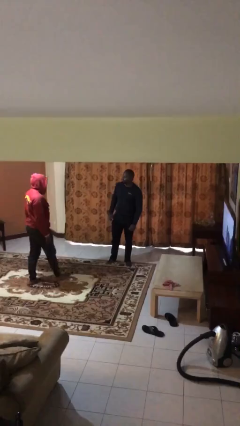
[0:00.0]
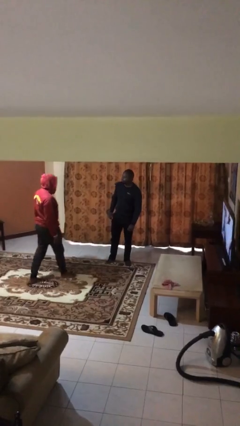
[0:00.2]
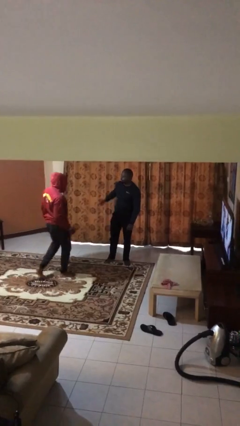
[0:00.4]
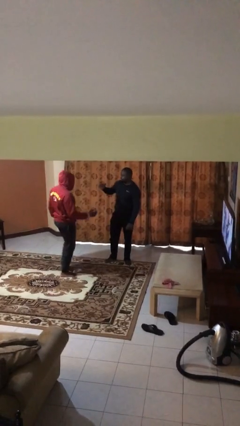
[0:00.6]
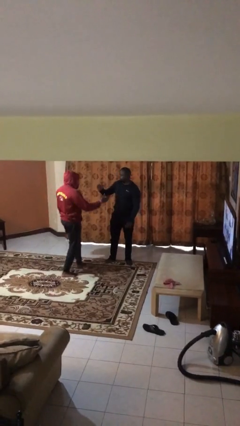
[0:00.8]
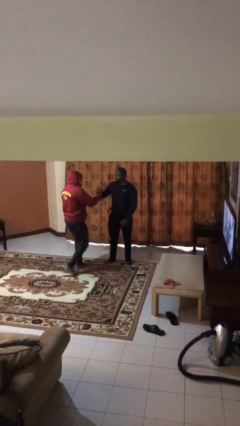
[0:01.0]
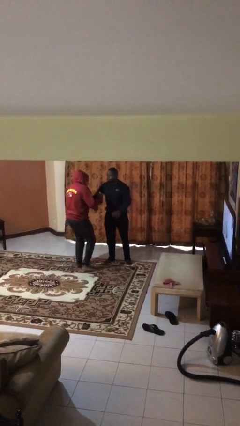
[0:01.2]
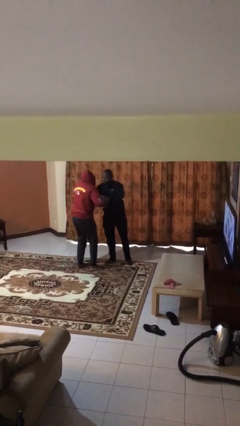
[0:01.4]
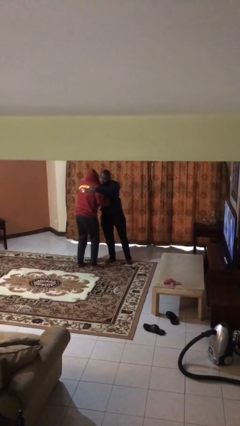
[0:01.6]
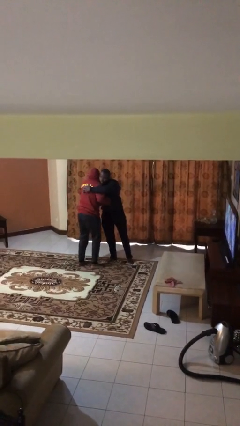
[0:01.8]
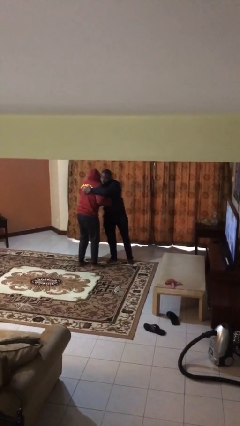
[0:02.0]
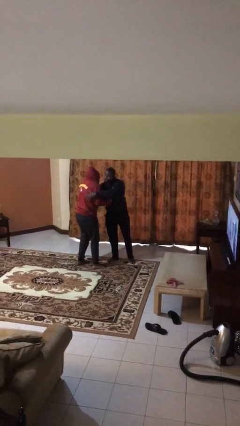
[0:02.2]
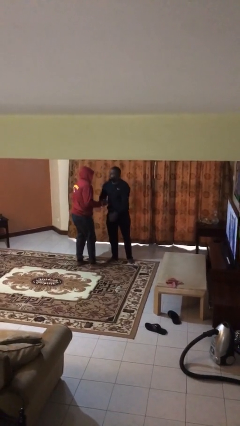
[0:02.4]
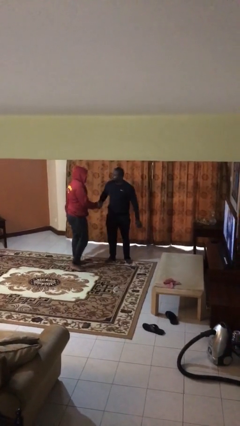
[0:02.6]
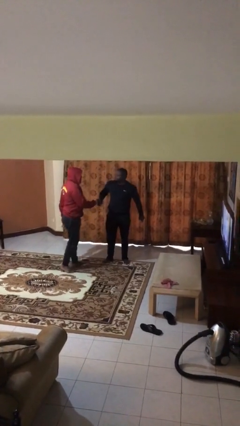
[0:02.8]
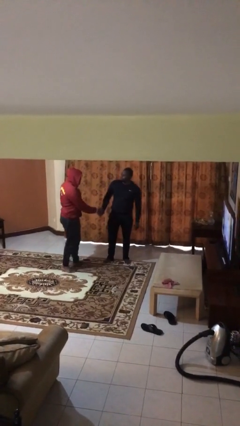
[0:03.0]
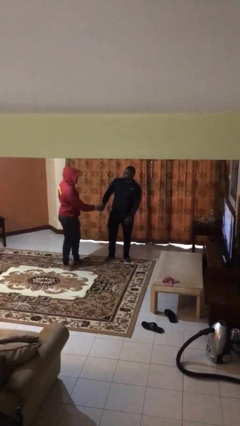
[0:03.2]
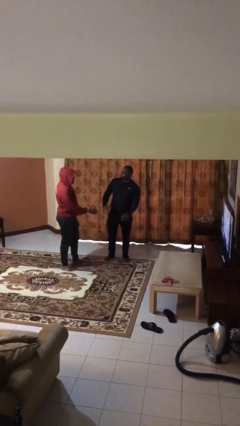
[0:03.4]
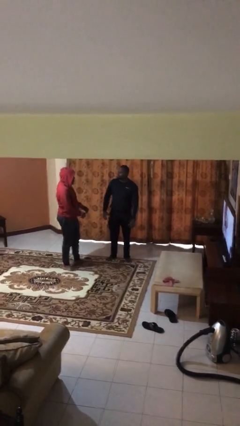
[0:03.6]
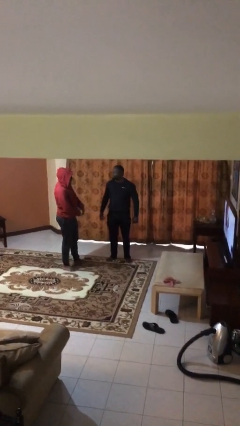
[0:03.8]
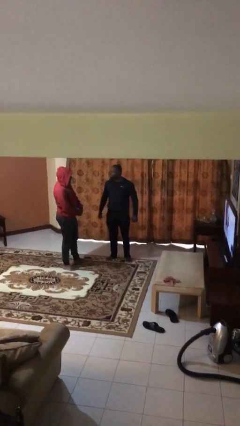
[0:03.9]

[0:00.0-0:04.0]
person embraces person

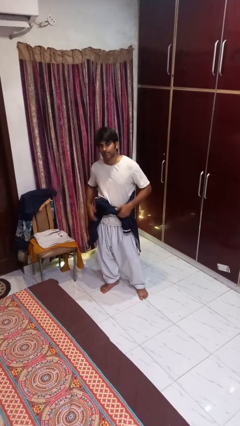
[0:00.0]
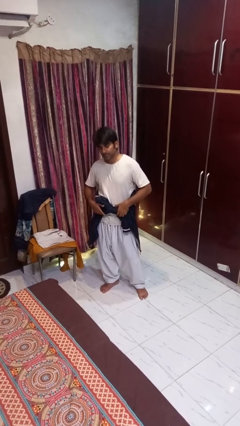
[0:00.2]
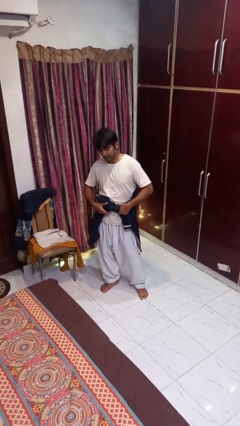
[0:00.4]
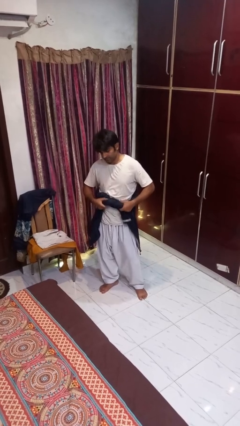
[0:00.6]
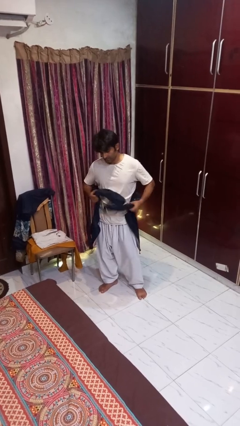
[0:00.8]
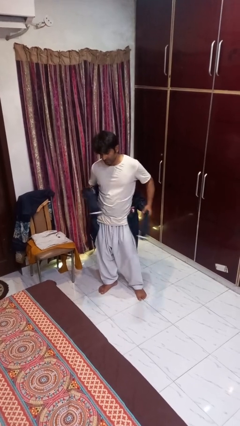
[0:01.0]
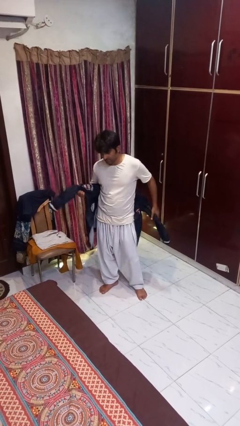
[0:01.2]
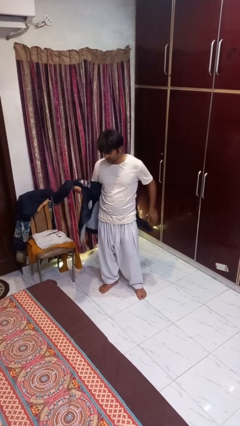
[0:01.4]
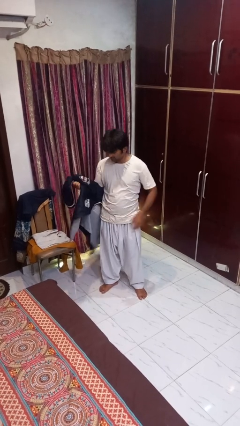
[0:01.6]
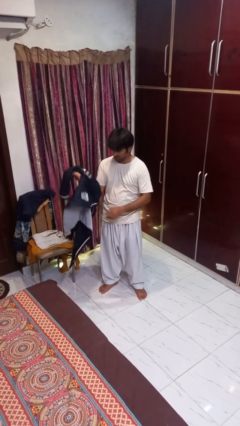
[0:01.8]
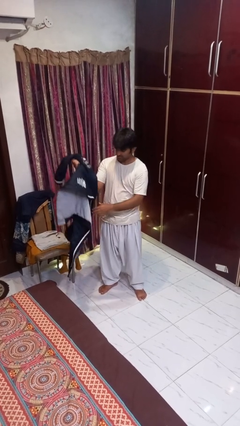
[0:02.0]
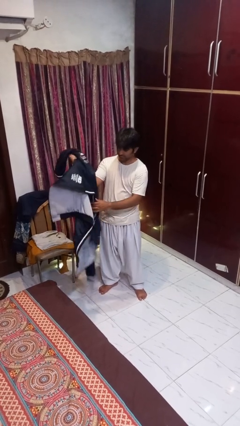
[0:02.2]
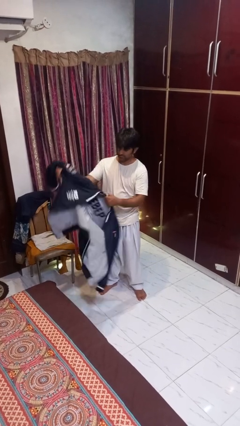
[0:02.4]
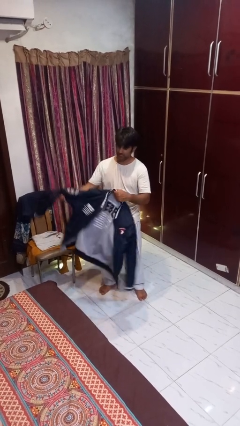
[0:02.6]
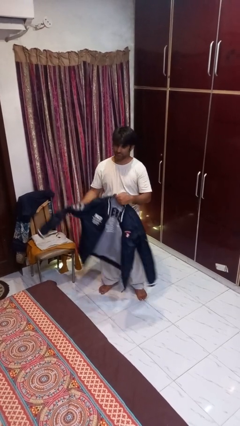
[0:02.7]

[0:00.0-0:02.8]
person unties jacket around waist

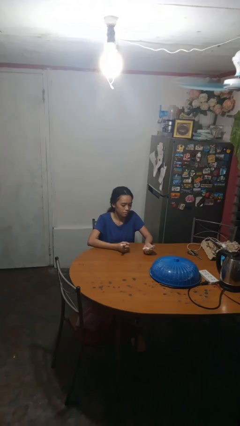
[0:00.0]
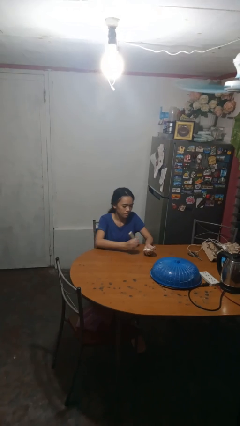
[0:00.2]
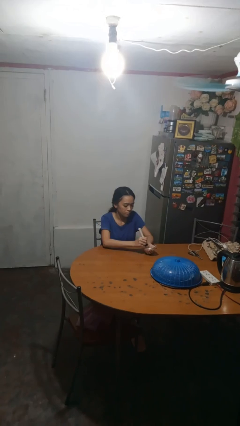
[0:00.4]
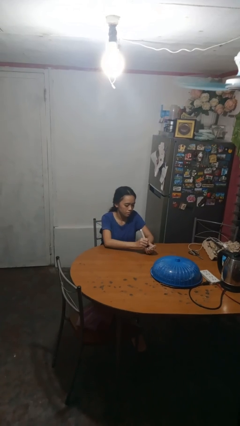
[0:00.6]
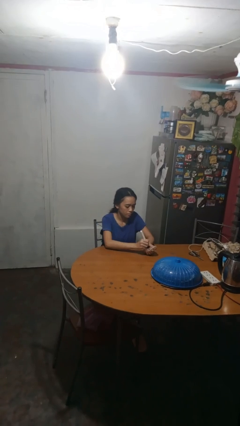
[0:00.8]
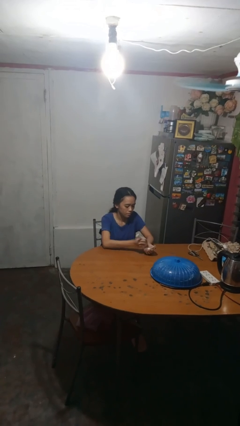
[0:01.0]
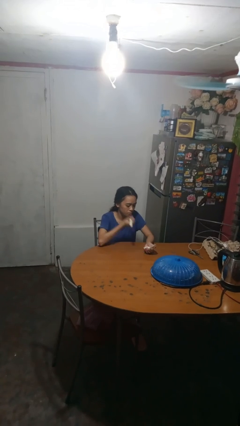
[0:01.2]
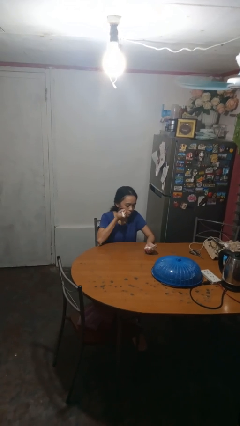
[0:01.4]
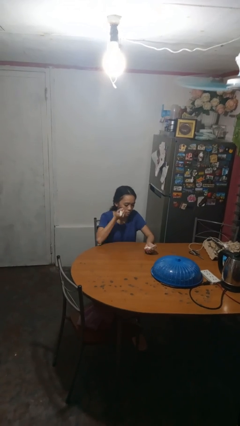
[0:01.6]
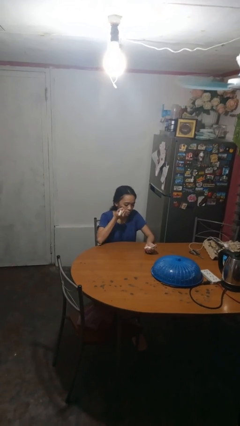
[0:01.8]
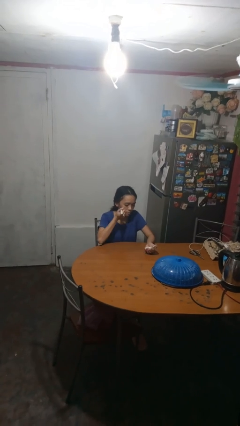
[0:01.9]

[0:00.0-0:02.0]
person applies foundation makeup

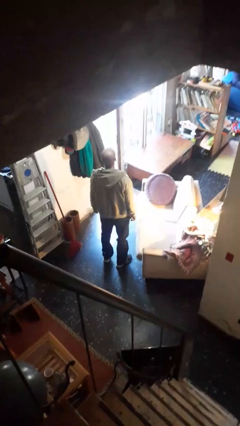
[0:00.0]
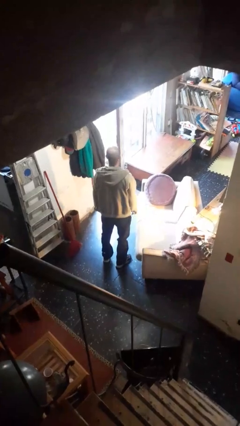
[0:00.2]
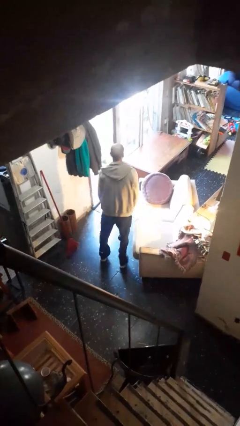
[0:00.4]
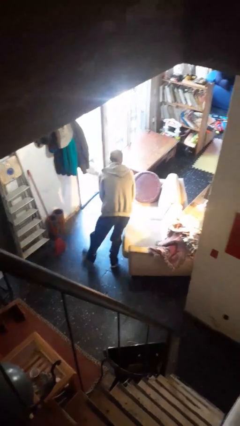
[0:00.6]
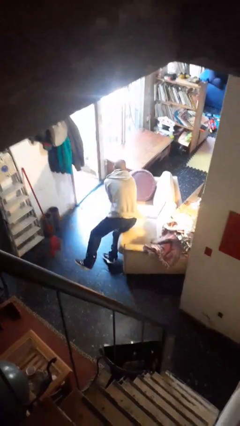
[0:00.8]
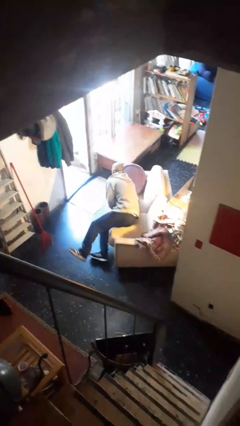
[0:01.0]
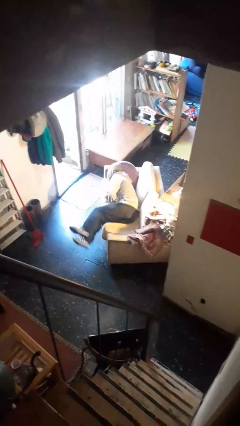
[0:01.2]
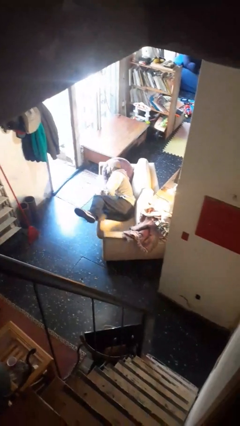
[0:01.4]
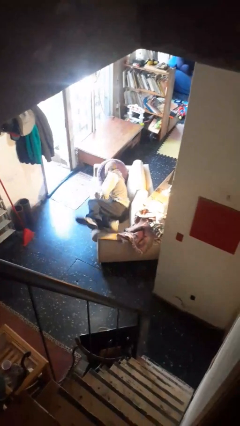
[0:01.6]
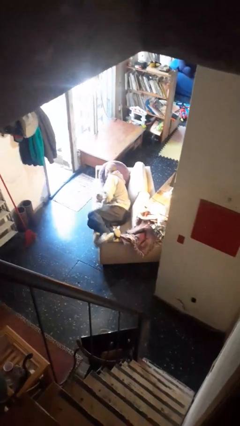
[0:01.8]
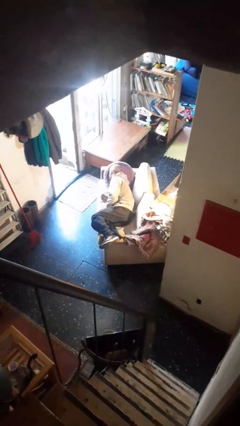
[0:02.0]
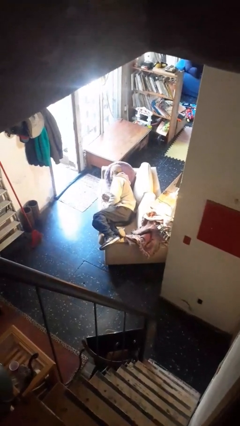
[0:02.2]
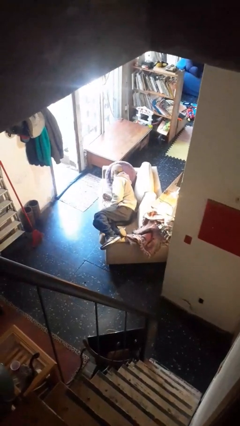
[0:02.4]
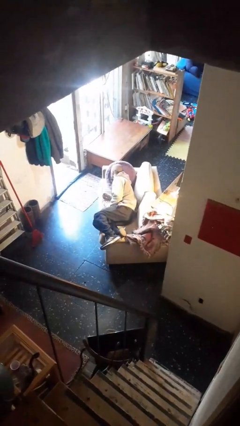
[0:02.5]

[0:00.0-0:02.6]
person lies down on couch

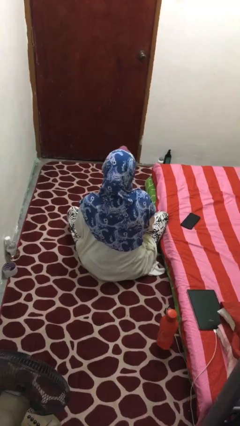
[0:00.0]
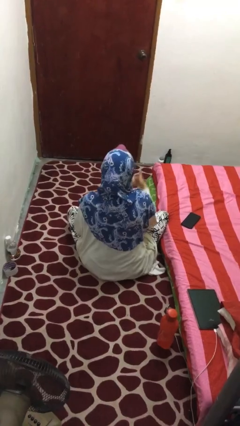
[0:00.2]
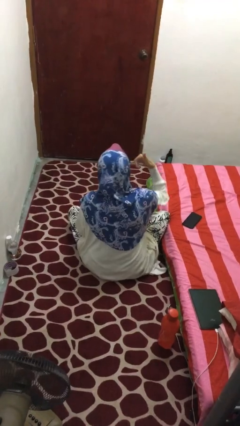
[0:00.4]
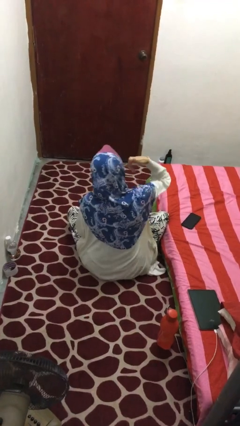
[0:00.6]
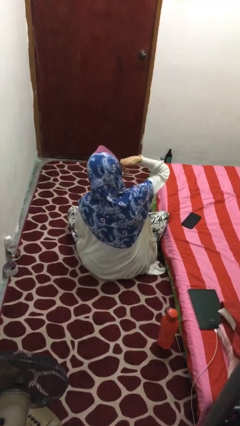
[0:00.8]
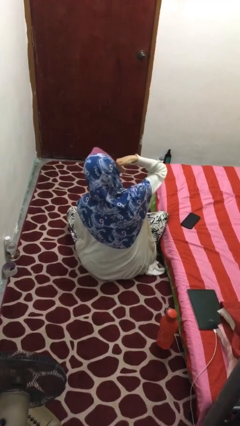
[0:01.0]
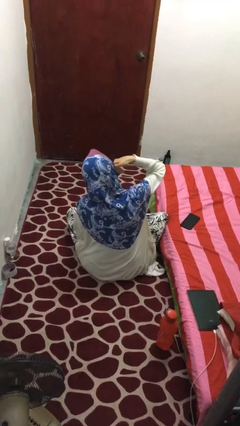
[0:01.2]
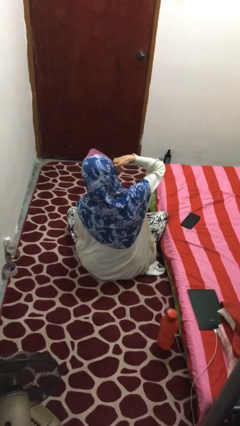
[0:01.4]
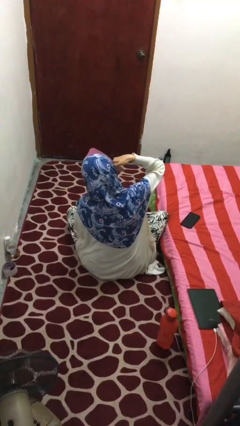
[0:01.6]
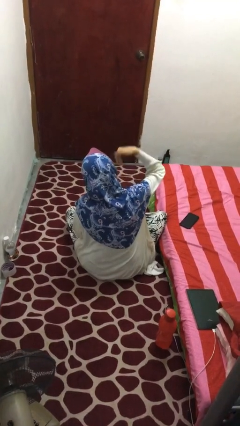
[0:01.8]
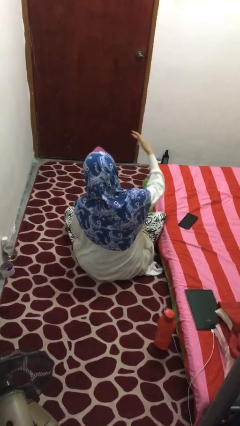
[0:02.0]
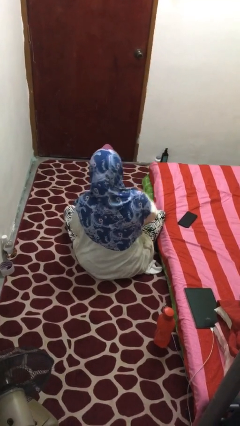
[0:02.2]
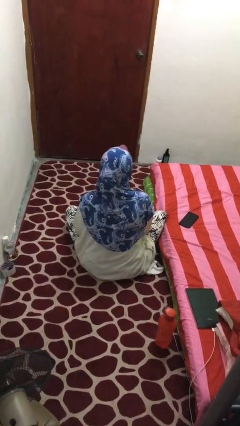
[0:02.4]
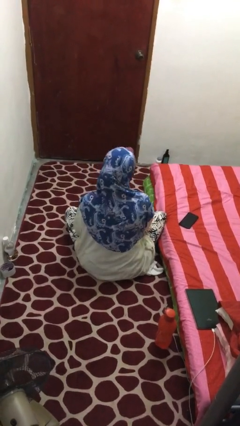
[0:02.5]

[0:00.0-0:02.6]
person gestures call me

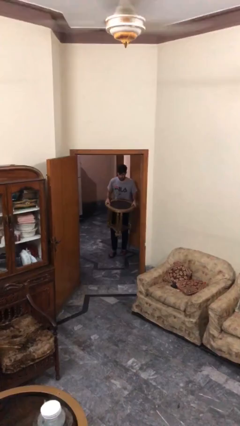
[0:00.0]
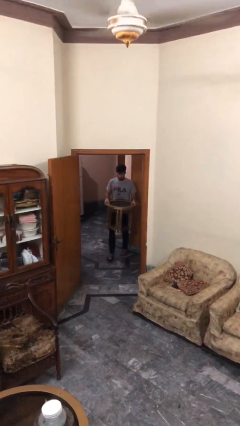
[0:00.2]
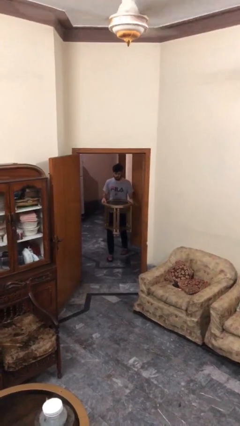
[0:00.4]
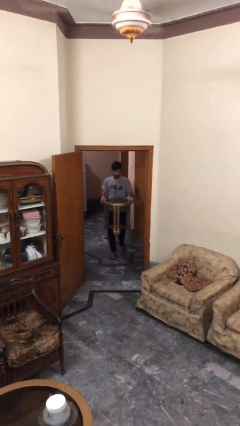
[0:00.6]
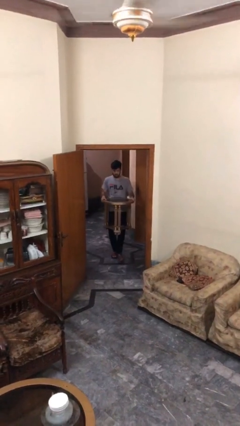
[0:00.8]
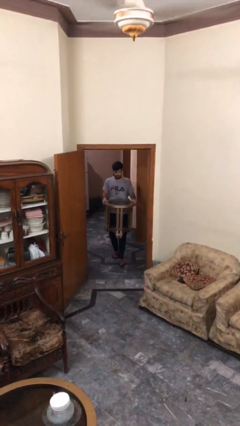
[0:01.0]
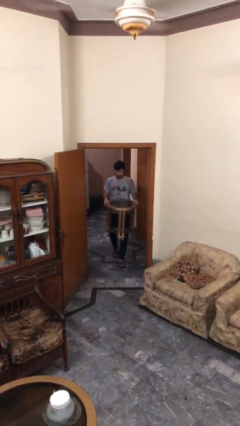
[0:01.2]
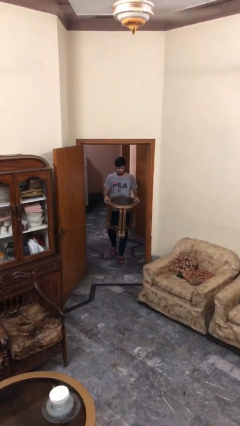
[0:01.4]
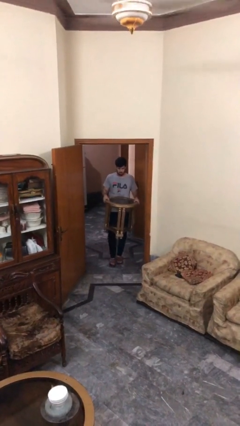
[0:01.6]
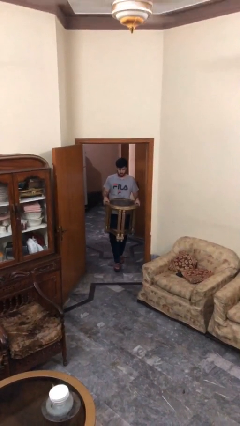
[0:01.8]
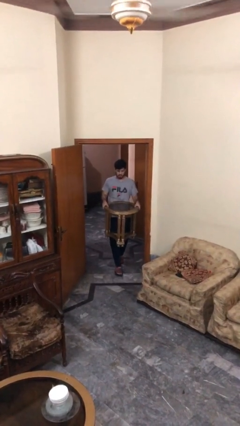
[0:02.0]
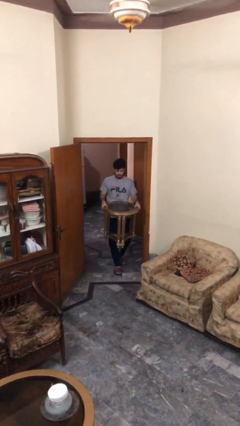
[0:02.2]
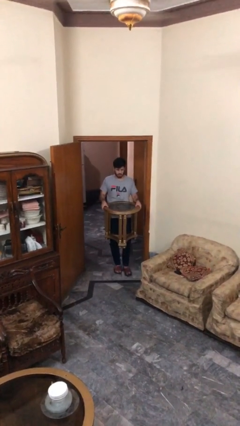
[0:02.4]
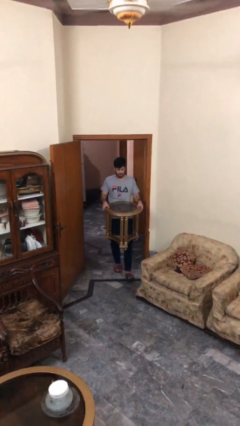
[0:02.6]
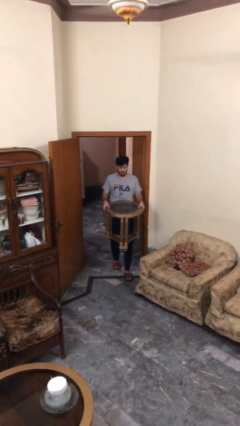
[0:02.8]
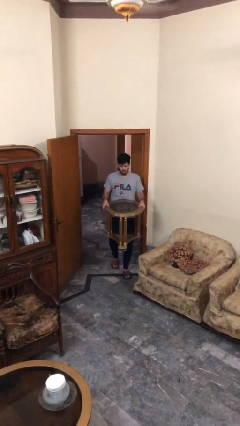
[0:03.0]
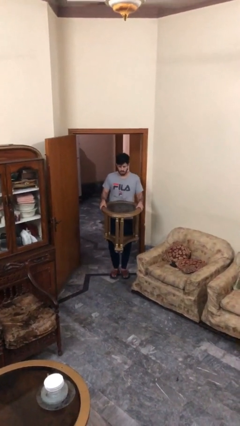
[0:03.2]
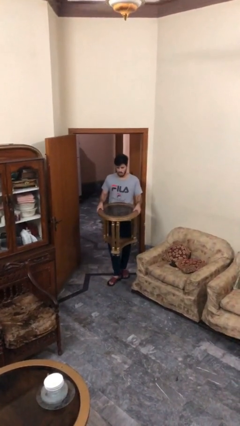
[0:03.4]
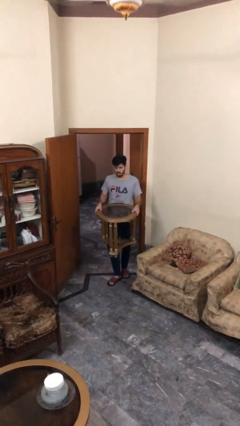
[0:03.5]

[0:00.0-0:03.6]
person carries furniture
